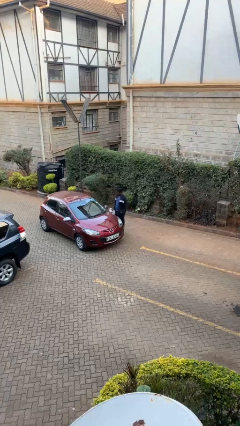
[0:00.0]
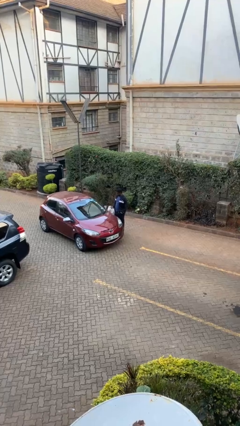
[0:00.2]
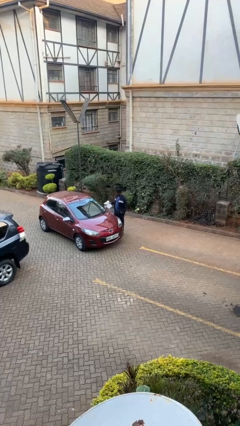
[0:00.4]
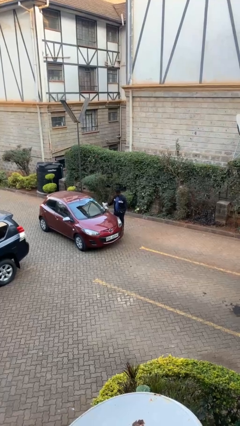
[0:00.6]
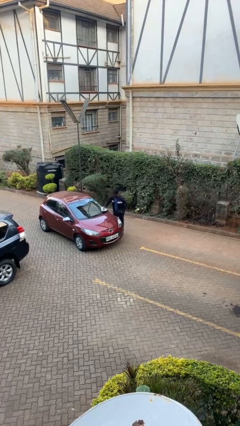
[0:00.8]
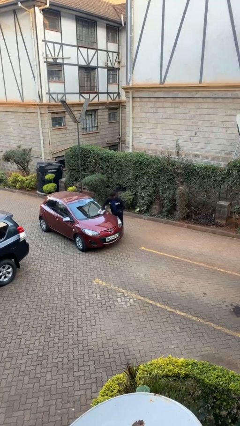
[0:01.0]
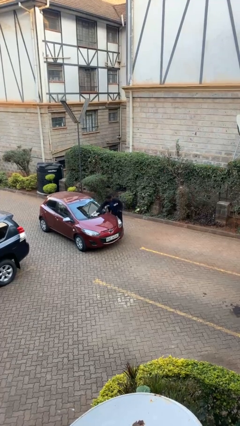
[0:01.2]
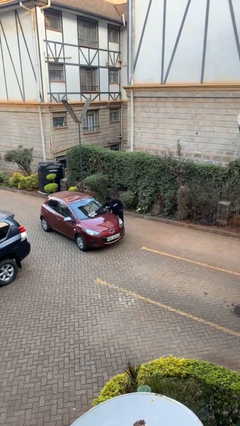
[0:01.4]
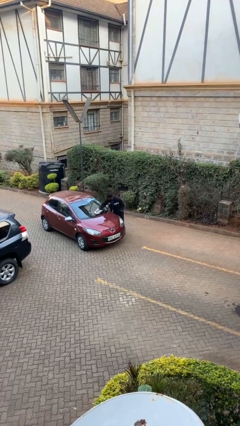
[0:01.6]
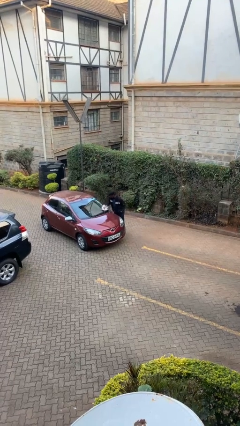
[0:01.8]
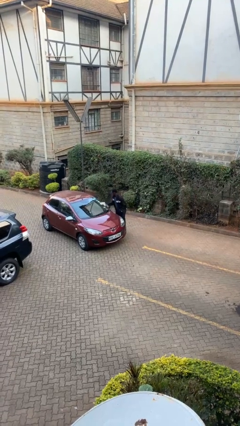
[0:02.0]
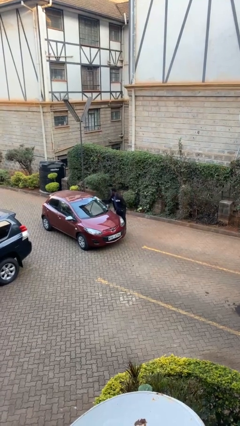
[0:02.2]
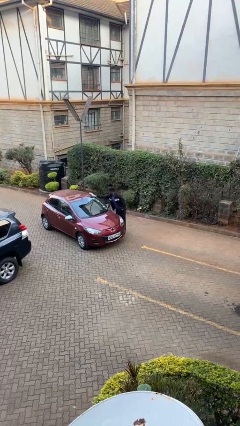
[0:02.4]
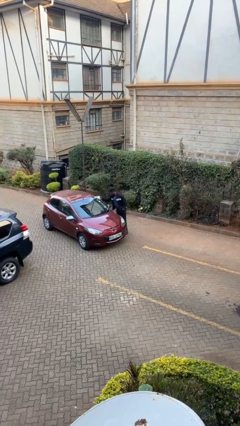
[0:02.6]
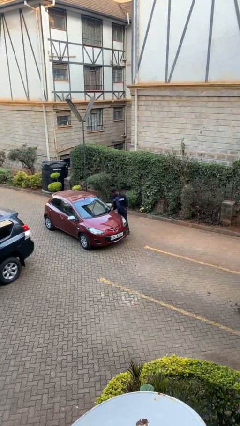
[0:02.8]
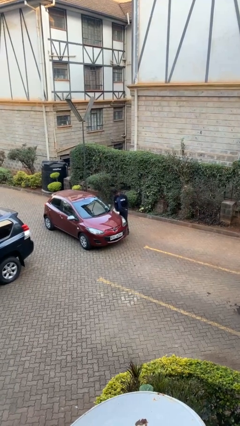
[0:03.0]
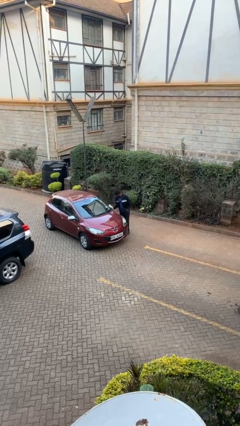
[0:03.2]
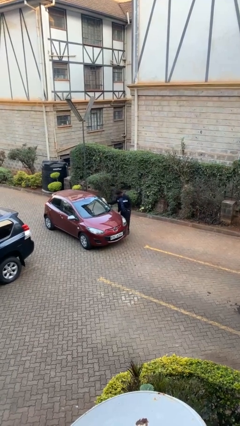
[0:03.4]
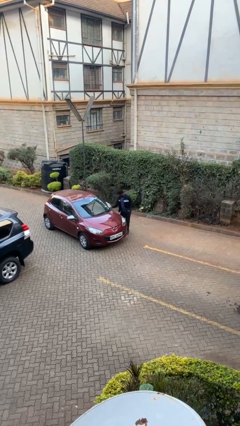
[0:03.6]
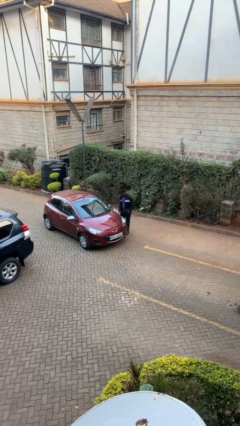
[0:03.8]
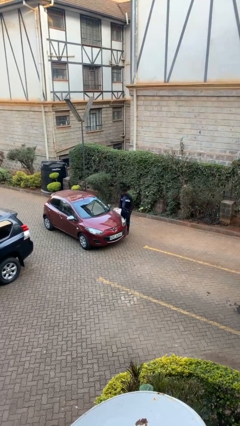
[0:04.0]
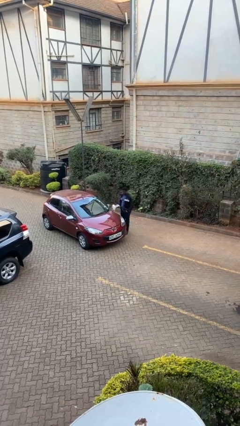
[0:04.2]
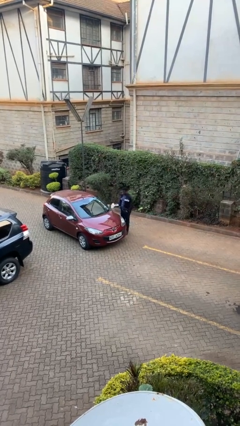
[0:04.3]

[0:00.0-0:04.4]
person polishes car with rag

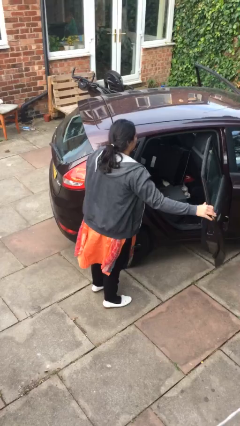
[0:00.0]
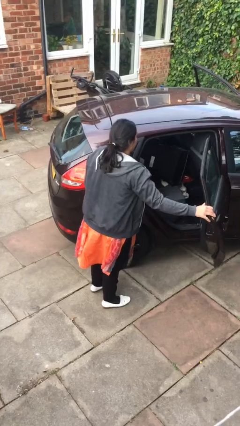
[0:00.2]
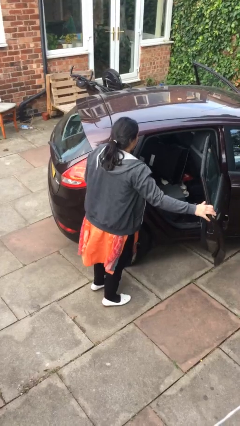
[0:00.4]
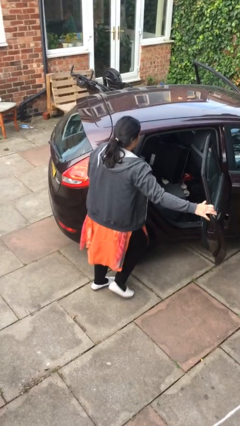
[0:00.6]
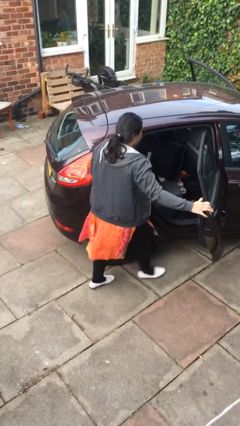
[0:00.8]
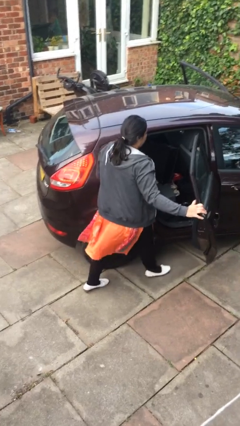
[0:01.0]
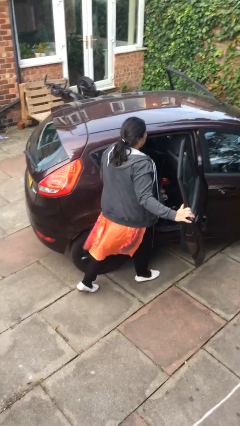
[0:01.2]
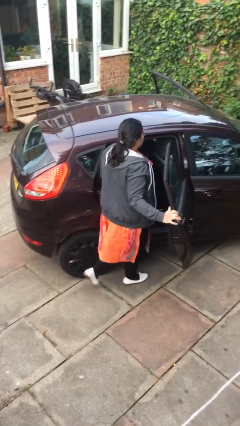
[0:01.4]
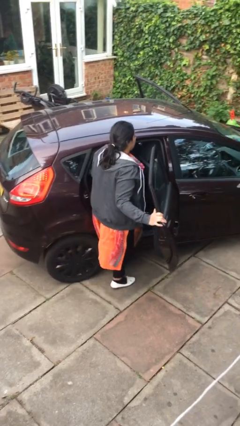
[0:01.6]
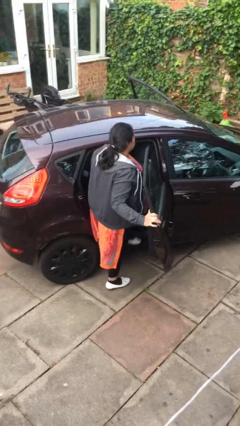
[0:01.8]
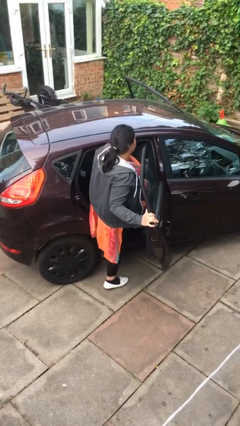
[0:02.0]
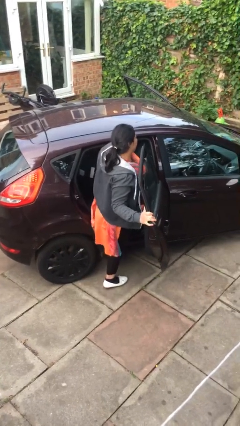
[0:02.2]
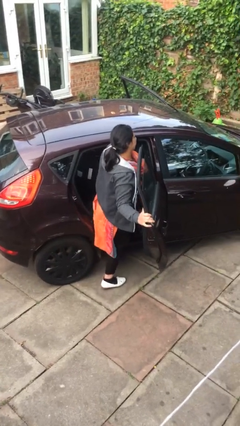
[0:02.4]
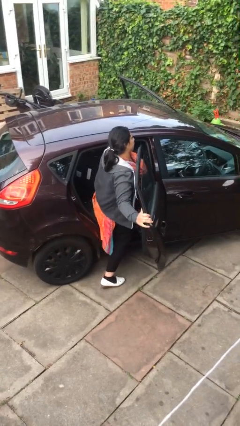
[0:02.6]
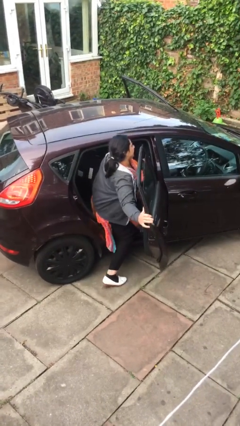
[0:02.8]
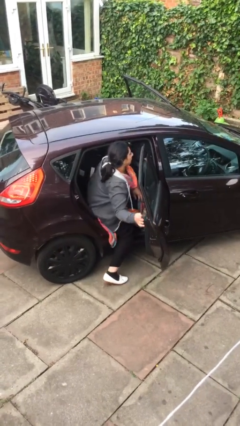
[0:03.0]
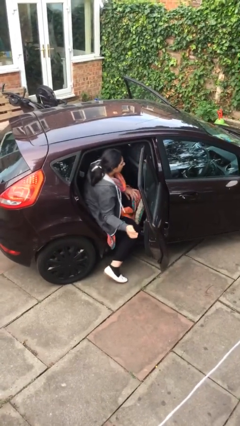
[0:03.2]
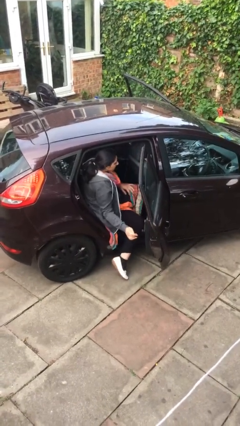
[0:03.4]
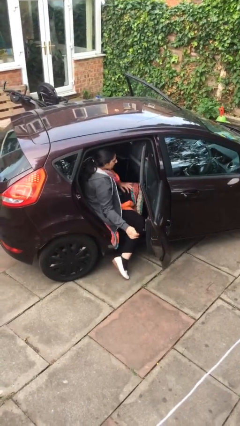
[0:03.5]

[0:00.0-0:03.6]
person enters car

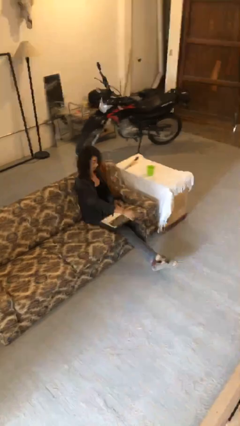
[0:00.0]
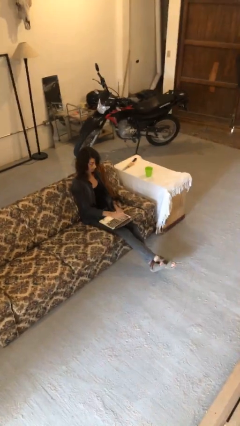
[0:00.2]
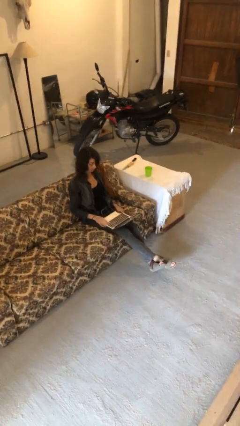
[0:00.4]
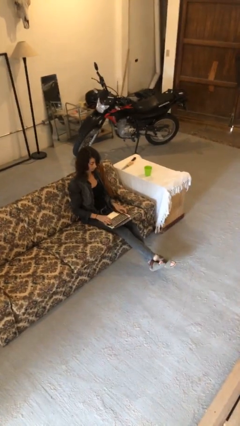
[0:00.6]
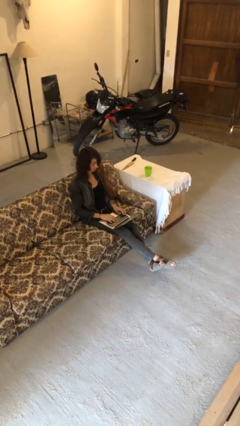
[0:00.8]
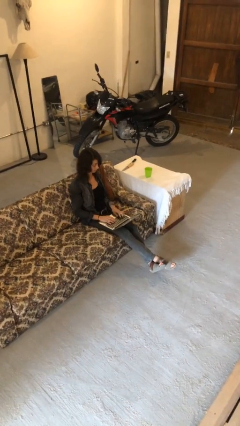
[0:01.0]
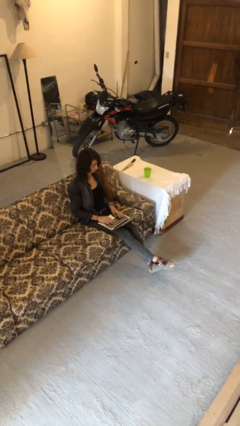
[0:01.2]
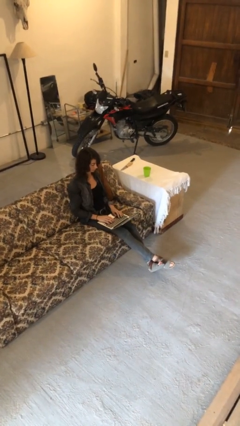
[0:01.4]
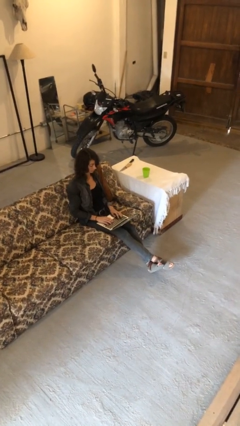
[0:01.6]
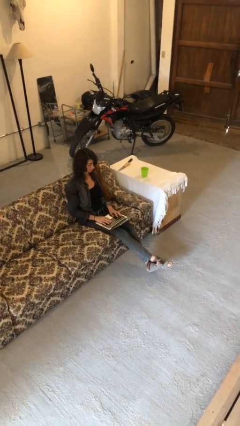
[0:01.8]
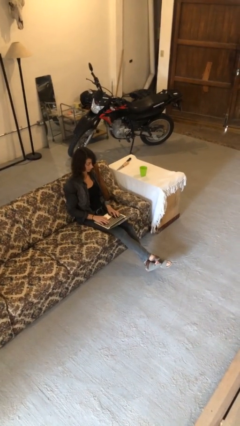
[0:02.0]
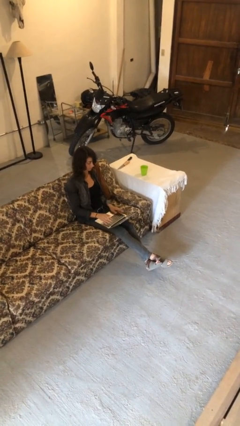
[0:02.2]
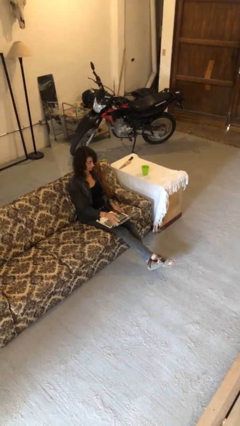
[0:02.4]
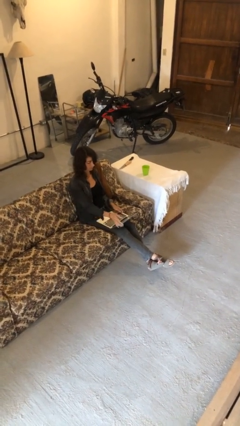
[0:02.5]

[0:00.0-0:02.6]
person closes laptop

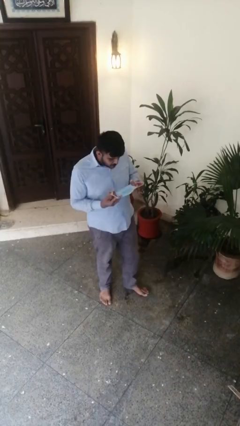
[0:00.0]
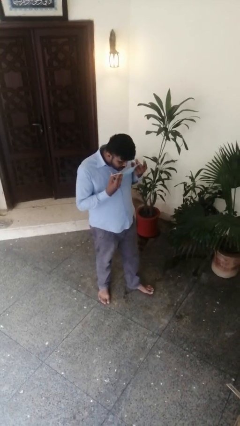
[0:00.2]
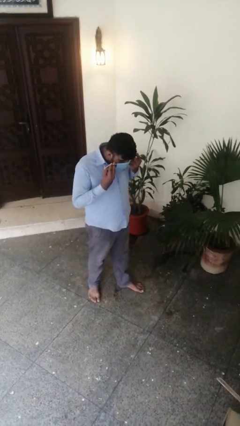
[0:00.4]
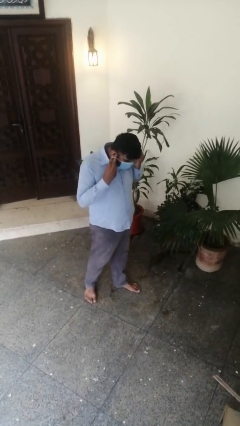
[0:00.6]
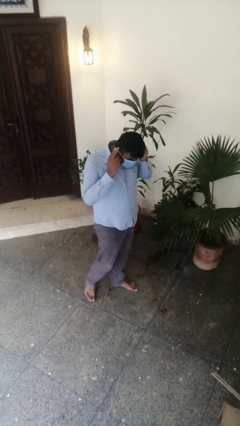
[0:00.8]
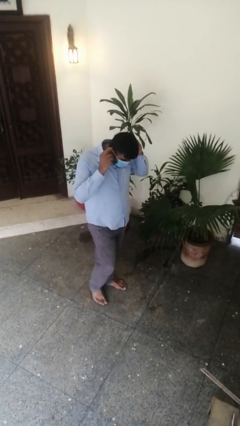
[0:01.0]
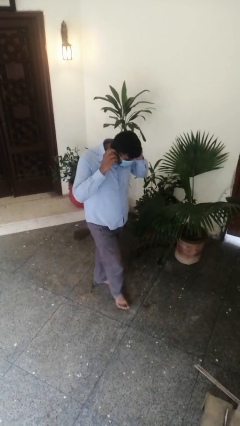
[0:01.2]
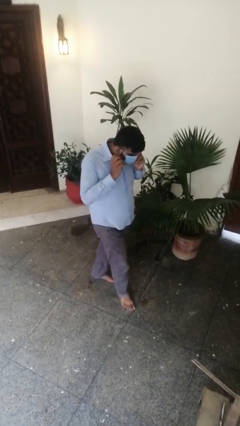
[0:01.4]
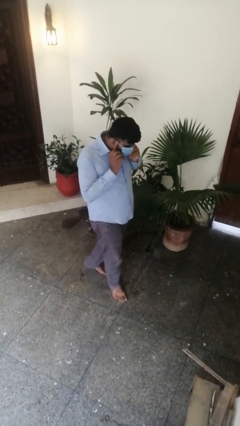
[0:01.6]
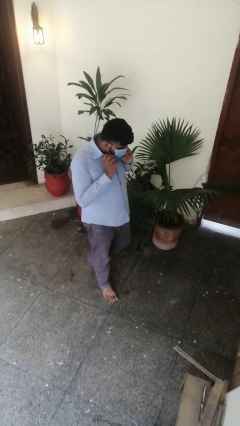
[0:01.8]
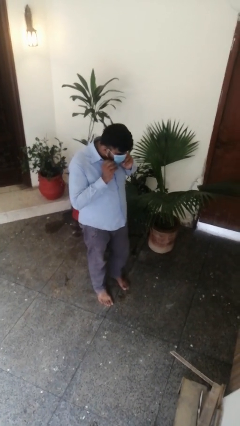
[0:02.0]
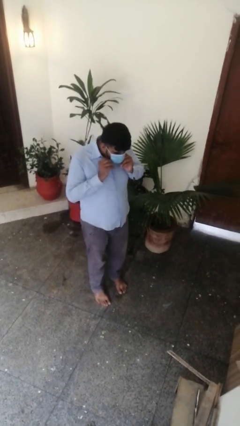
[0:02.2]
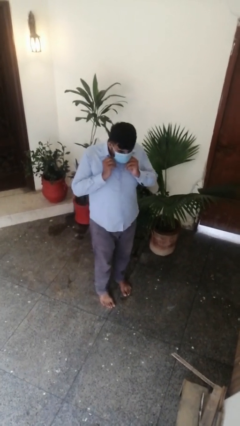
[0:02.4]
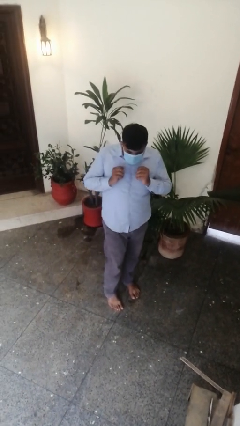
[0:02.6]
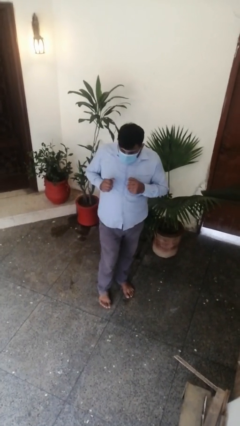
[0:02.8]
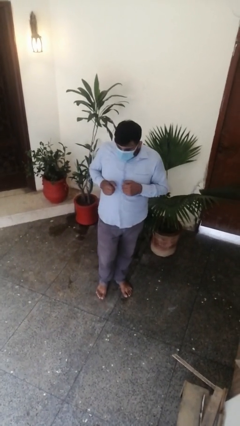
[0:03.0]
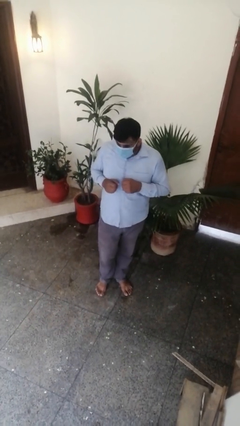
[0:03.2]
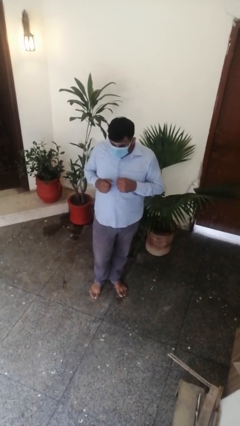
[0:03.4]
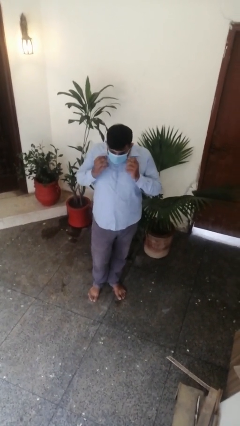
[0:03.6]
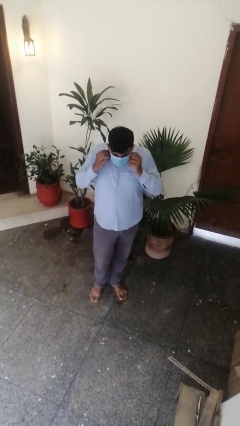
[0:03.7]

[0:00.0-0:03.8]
person puts on facemask

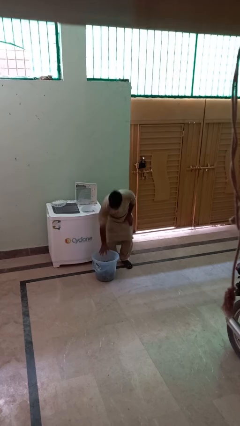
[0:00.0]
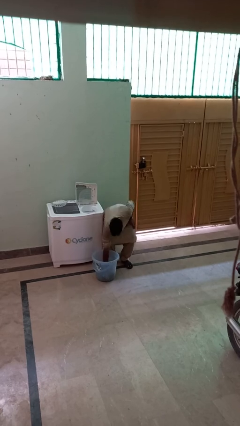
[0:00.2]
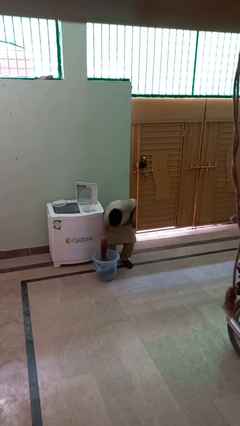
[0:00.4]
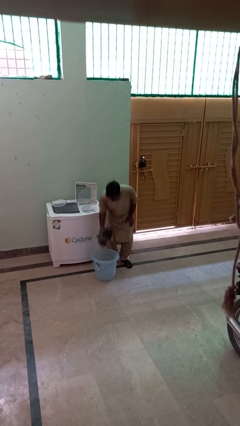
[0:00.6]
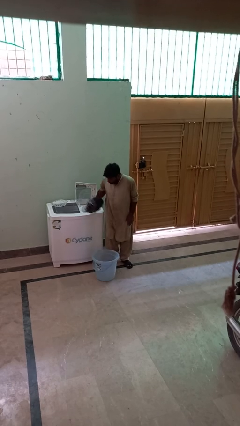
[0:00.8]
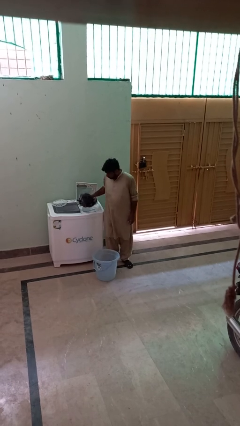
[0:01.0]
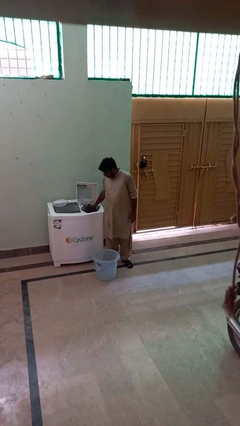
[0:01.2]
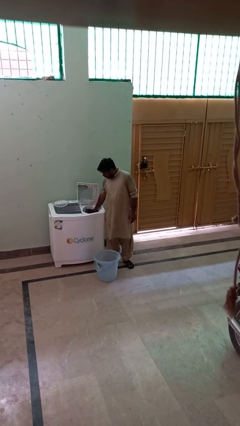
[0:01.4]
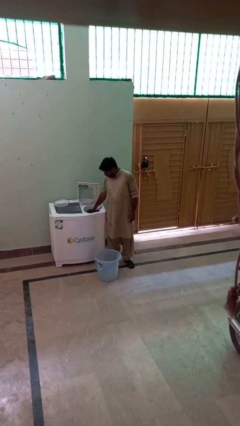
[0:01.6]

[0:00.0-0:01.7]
person loads dryer

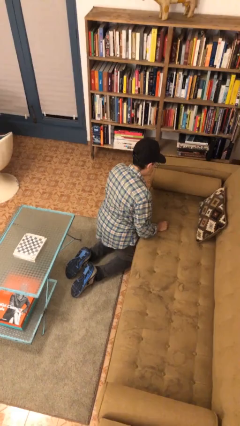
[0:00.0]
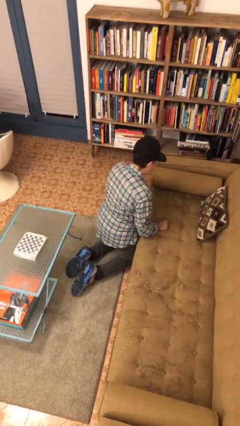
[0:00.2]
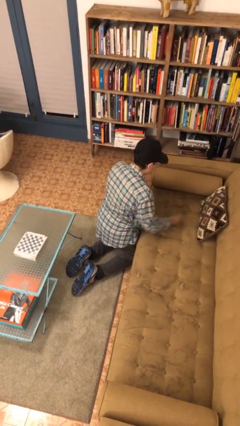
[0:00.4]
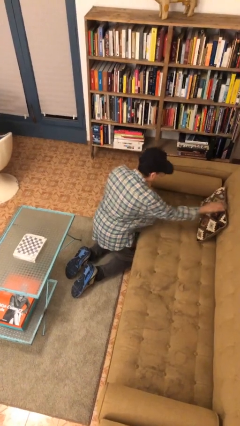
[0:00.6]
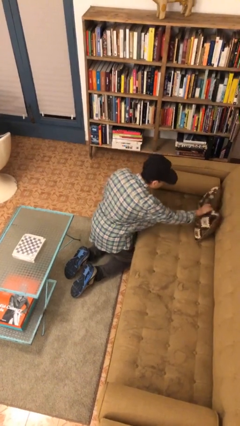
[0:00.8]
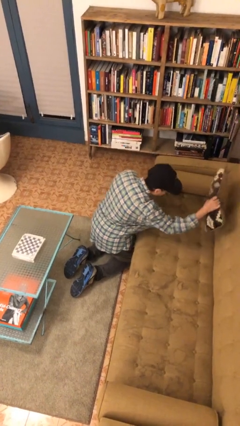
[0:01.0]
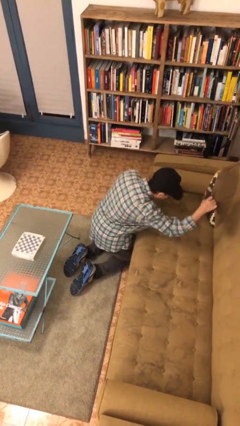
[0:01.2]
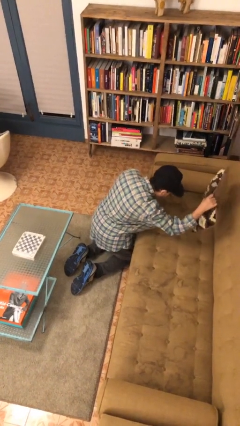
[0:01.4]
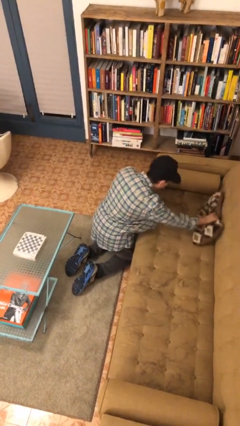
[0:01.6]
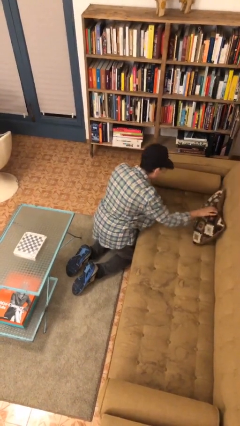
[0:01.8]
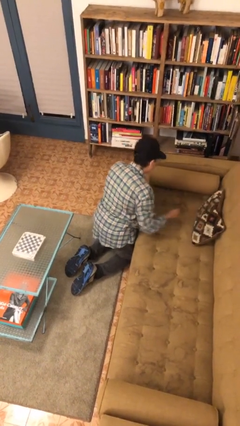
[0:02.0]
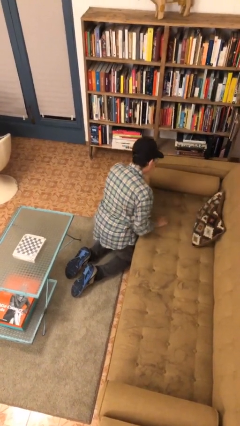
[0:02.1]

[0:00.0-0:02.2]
person searches in couch
